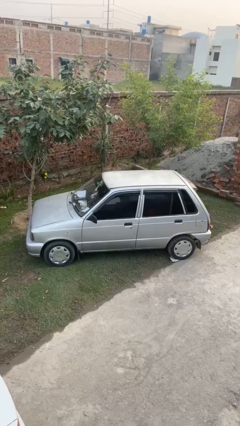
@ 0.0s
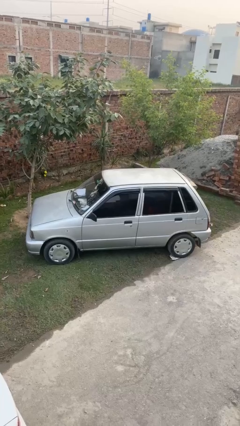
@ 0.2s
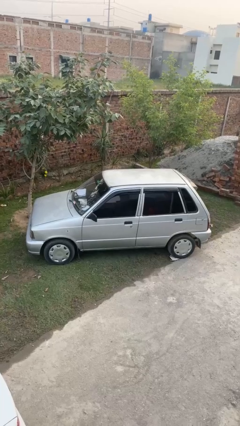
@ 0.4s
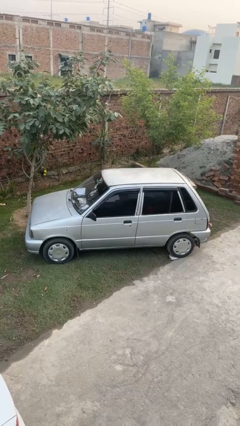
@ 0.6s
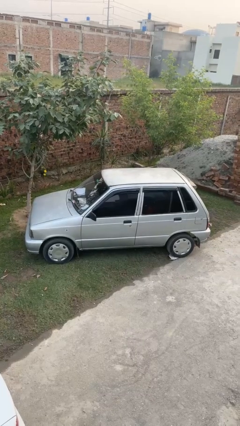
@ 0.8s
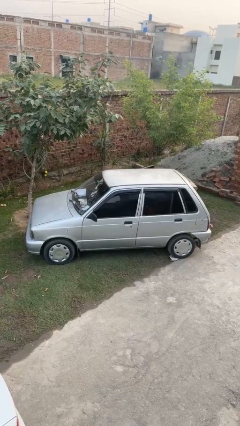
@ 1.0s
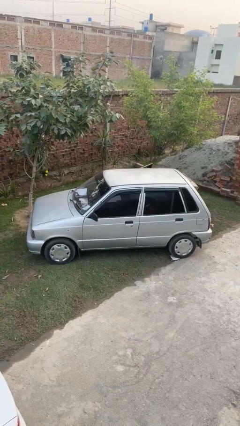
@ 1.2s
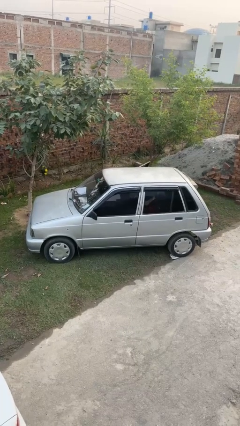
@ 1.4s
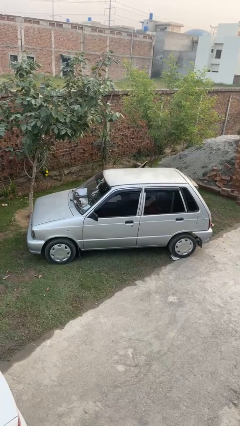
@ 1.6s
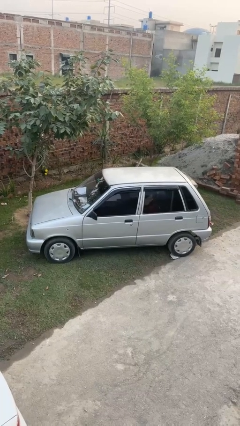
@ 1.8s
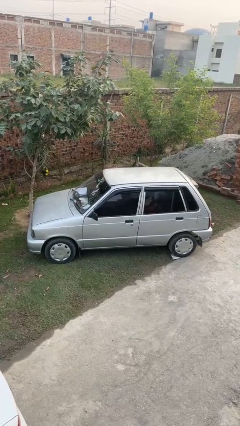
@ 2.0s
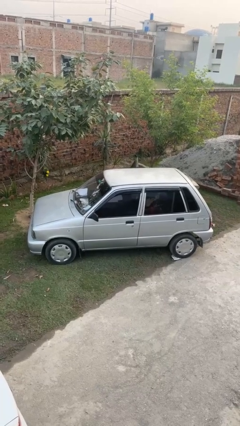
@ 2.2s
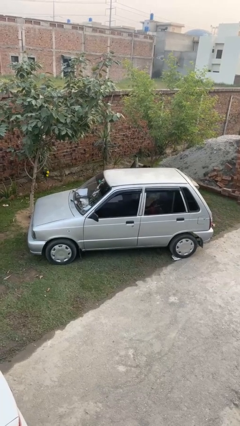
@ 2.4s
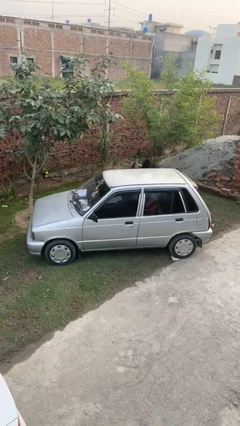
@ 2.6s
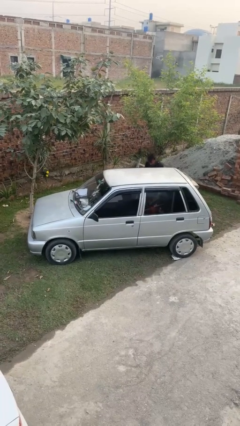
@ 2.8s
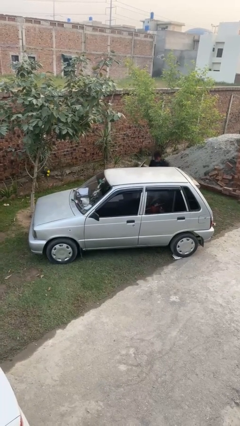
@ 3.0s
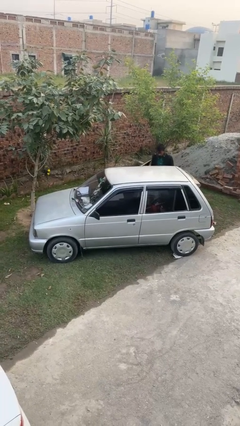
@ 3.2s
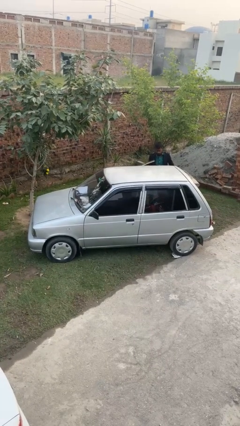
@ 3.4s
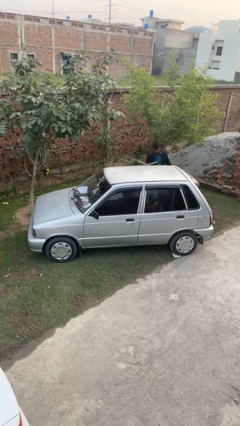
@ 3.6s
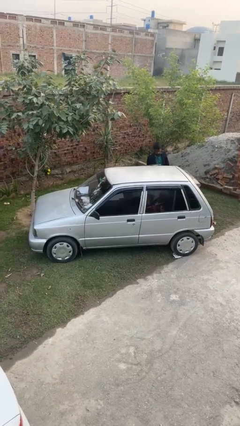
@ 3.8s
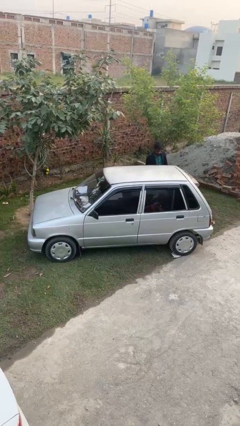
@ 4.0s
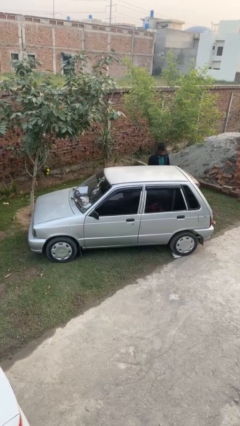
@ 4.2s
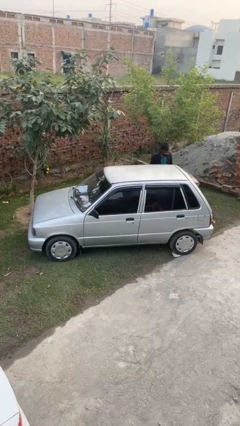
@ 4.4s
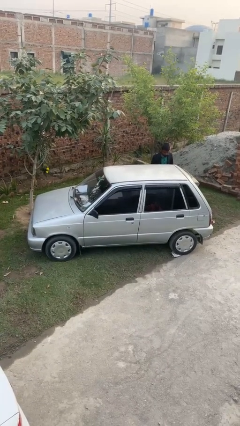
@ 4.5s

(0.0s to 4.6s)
car drops off person

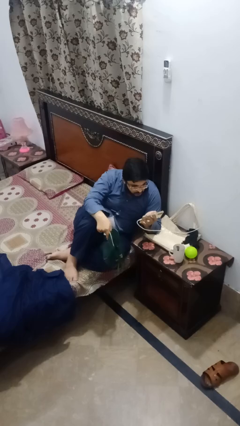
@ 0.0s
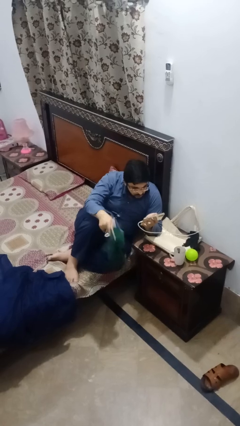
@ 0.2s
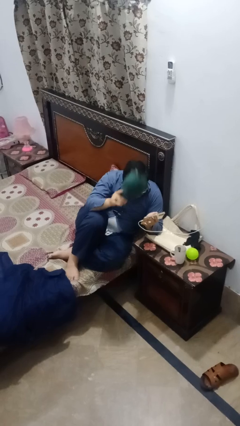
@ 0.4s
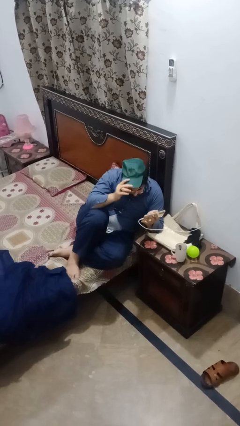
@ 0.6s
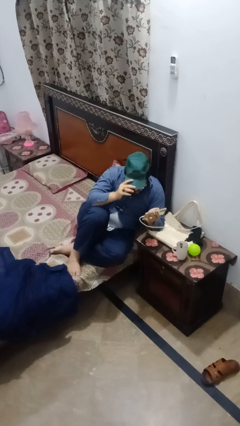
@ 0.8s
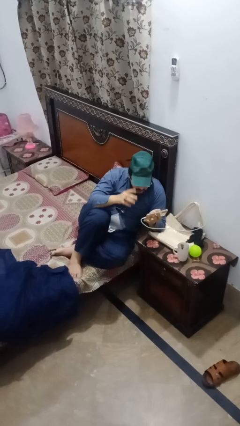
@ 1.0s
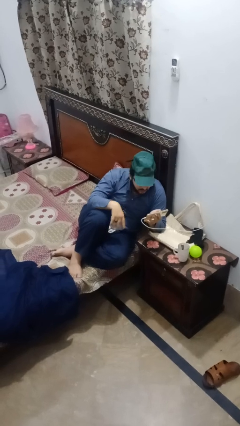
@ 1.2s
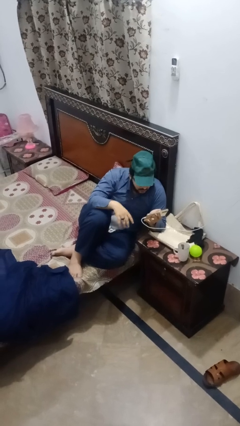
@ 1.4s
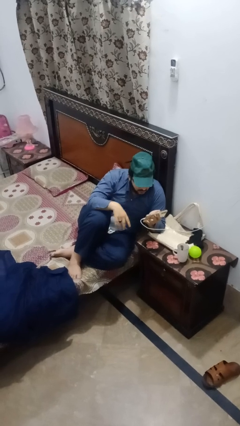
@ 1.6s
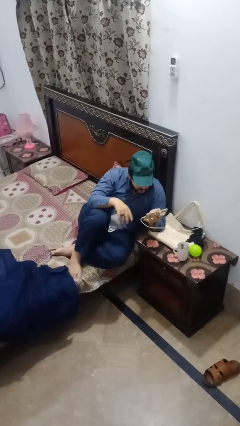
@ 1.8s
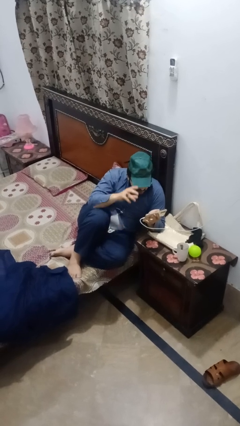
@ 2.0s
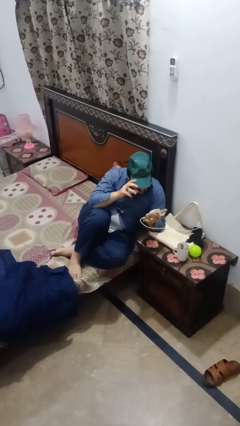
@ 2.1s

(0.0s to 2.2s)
person puts on hat

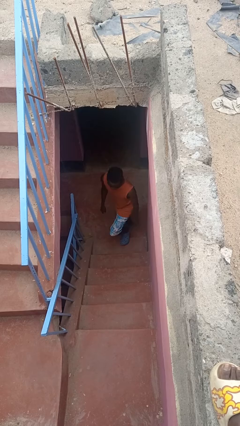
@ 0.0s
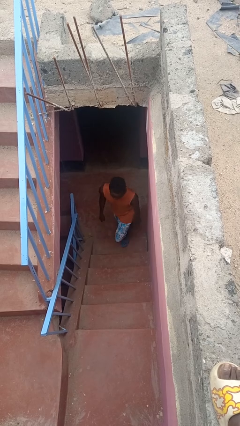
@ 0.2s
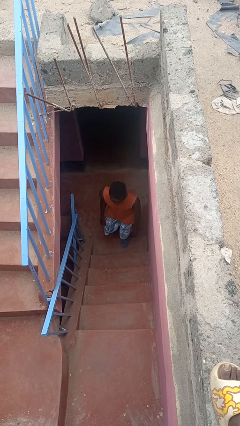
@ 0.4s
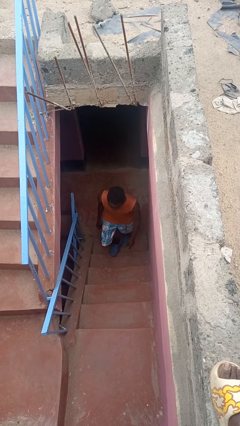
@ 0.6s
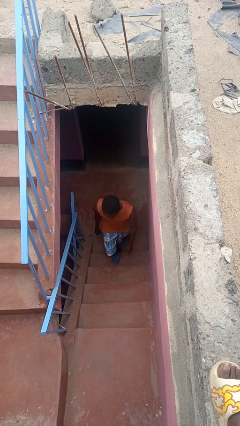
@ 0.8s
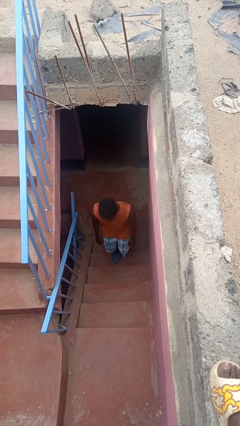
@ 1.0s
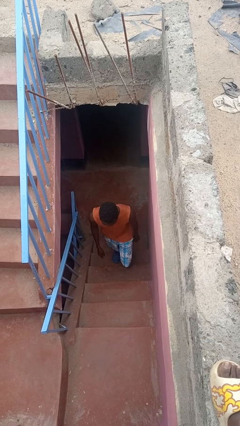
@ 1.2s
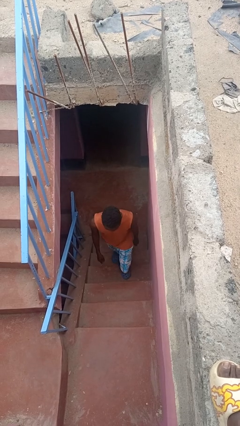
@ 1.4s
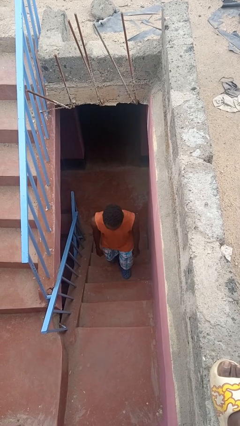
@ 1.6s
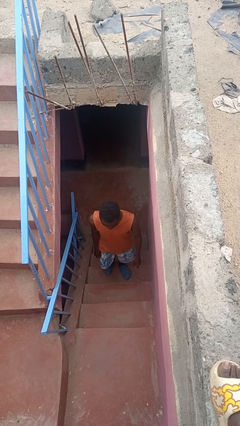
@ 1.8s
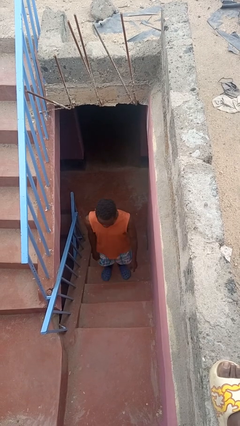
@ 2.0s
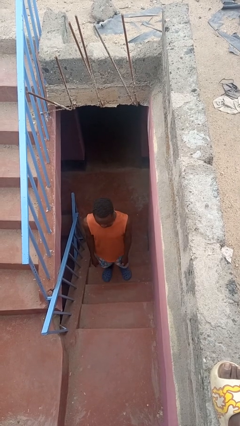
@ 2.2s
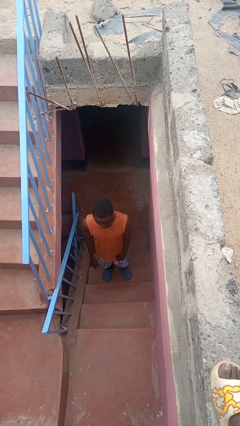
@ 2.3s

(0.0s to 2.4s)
person climbs up stairs

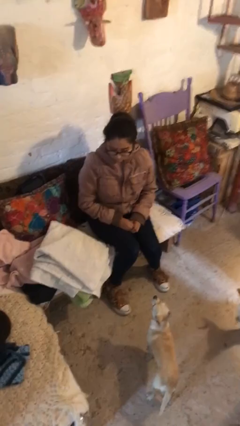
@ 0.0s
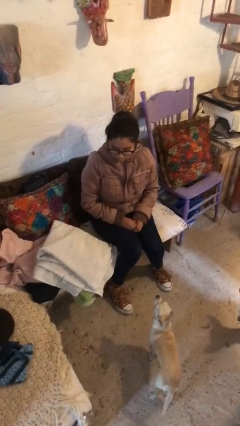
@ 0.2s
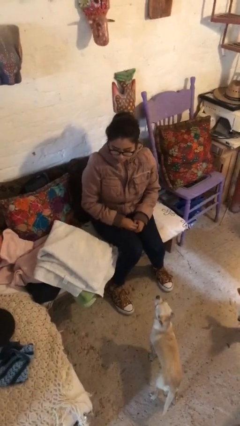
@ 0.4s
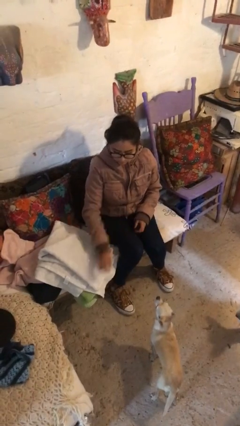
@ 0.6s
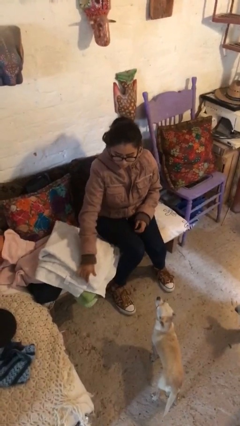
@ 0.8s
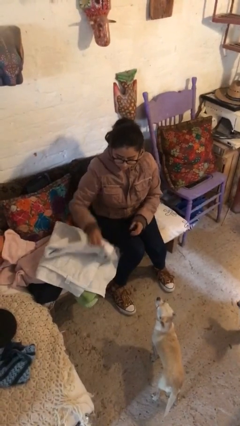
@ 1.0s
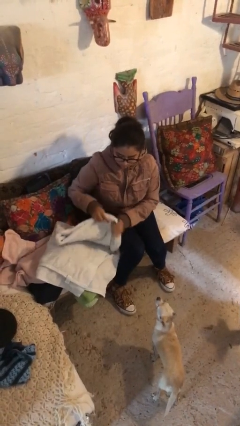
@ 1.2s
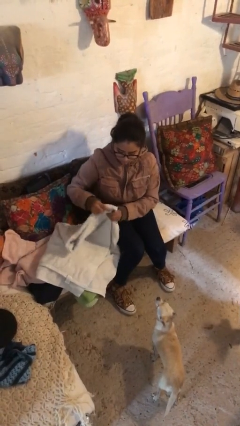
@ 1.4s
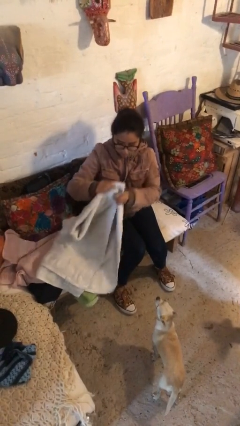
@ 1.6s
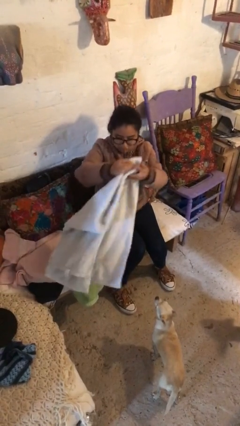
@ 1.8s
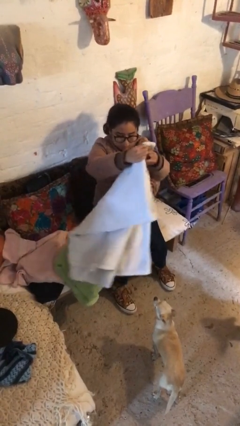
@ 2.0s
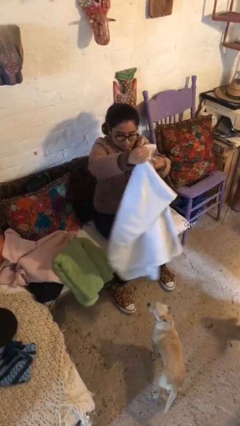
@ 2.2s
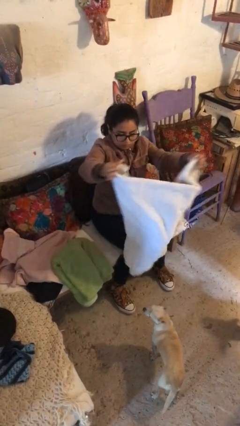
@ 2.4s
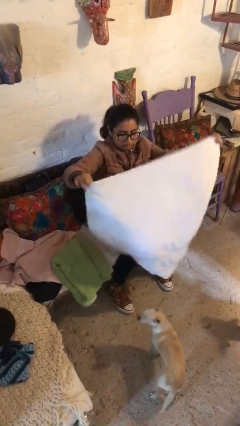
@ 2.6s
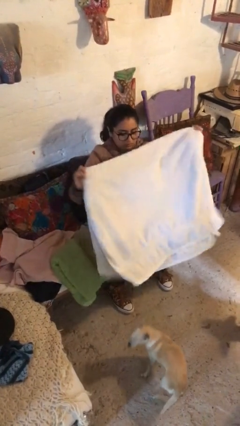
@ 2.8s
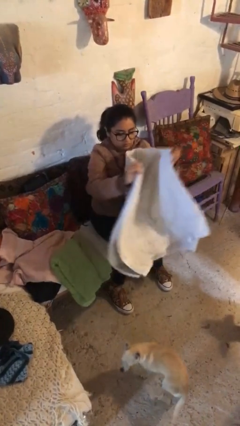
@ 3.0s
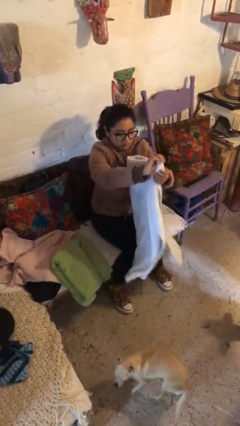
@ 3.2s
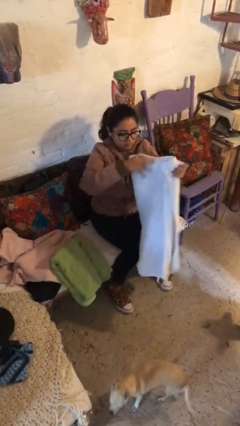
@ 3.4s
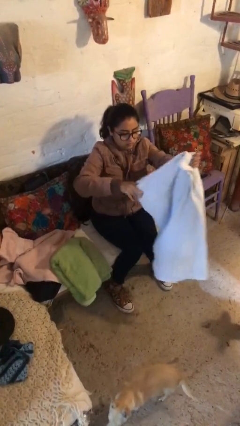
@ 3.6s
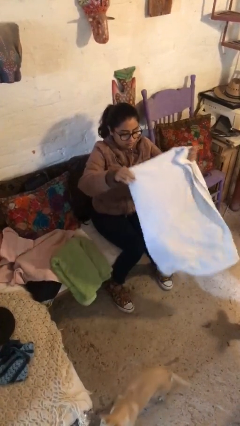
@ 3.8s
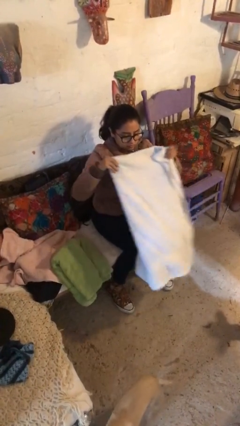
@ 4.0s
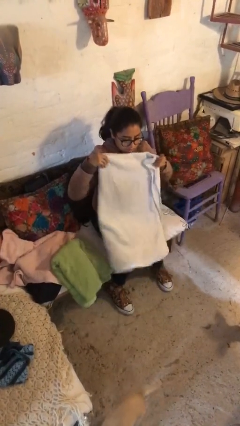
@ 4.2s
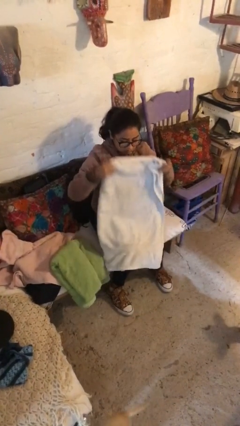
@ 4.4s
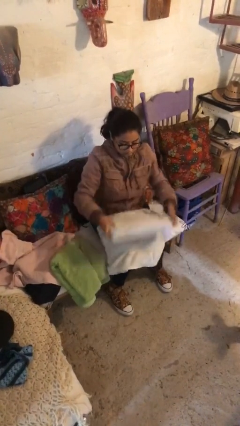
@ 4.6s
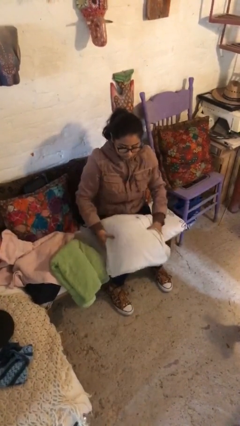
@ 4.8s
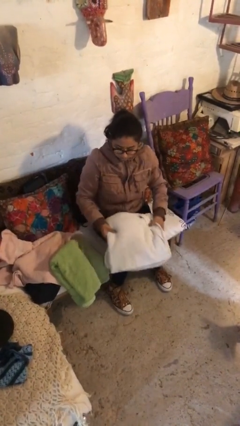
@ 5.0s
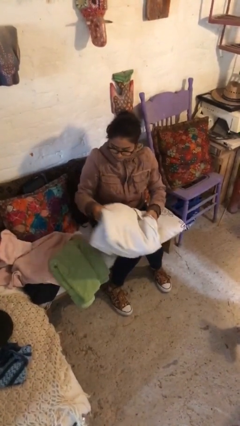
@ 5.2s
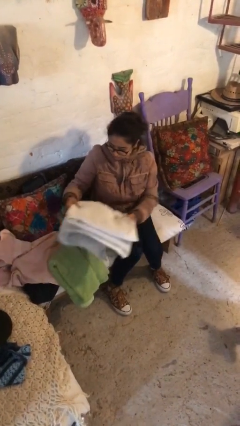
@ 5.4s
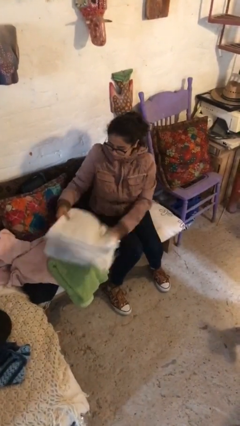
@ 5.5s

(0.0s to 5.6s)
person folds towel

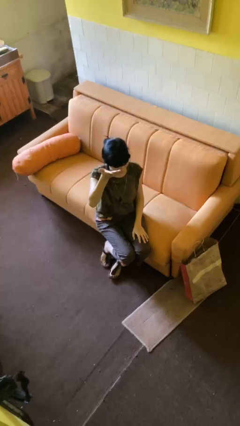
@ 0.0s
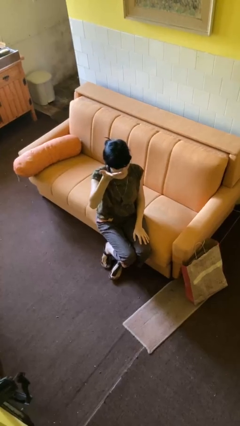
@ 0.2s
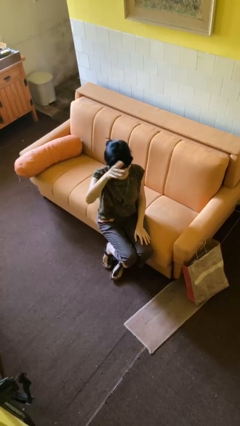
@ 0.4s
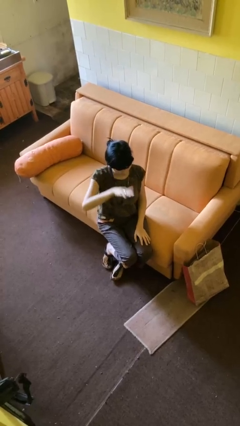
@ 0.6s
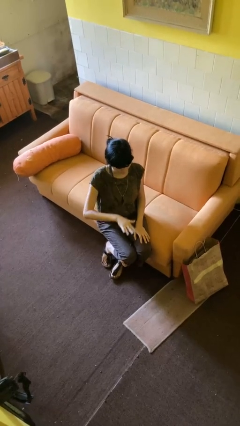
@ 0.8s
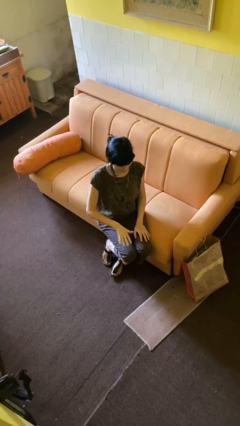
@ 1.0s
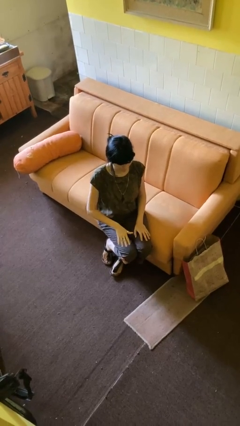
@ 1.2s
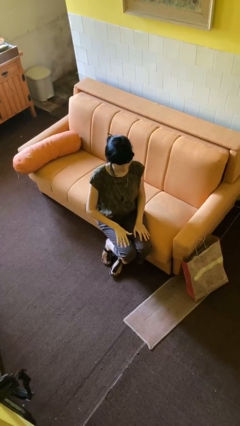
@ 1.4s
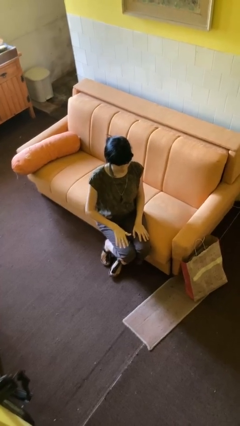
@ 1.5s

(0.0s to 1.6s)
person gestures swipe down

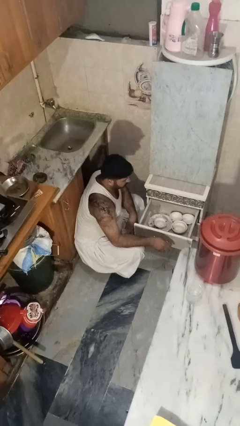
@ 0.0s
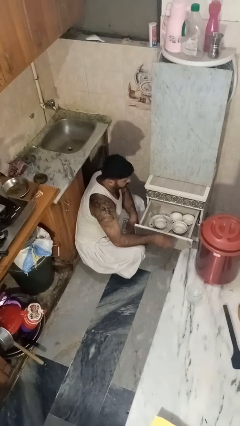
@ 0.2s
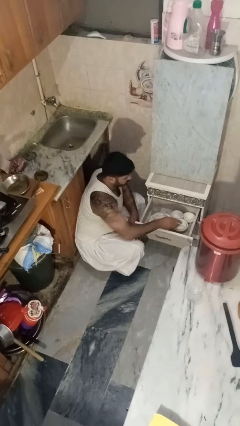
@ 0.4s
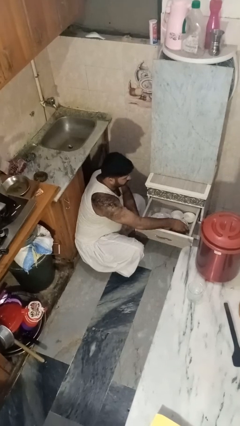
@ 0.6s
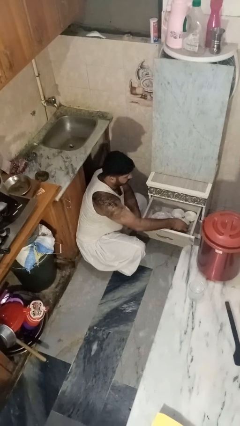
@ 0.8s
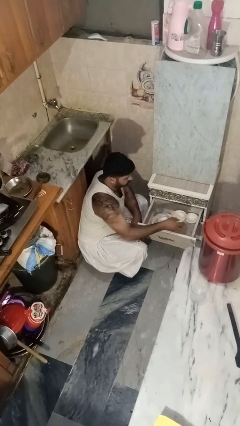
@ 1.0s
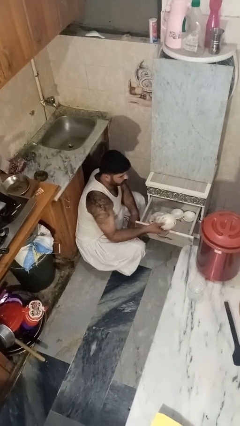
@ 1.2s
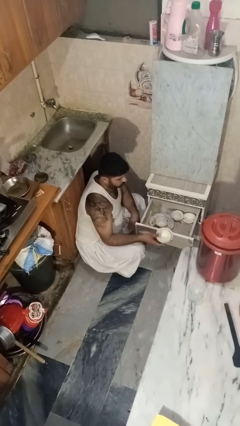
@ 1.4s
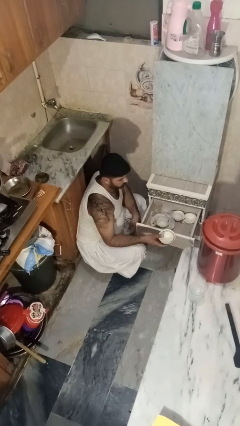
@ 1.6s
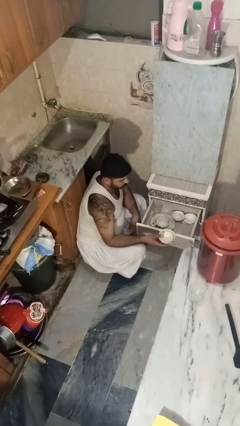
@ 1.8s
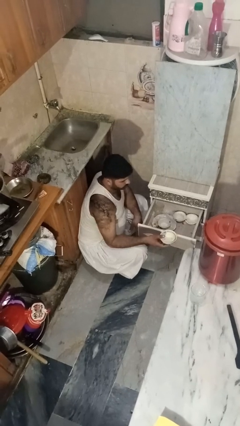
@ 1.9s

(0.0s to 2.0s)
person takes object from kitchen drawer
